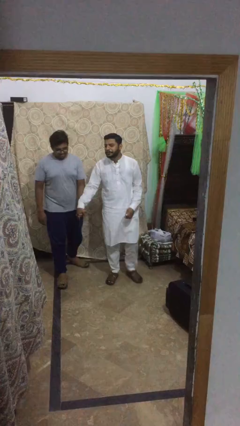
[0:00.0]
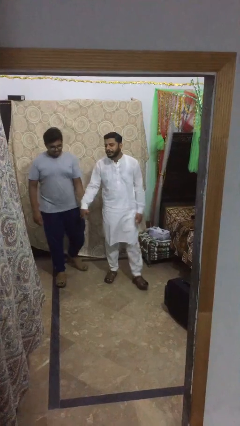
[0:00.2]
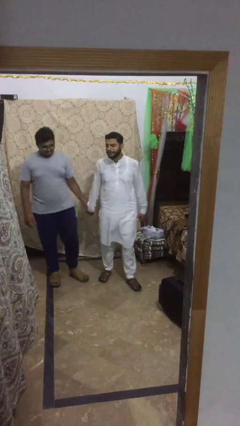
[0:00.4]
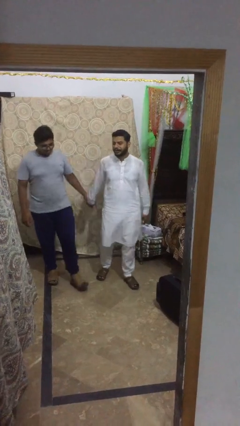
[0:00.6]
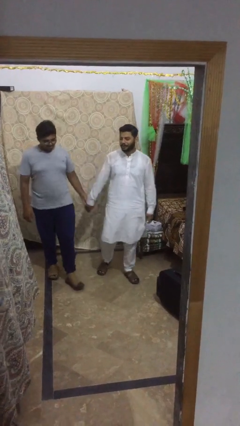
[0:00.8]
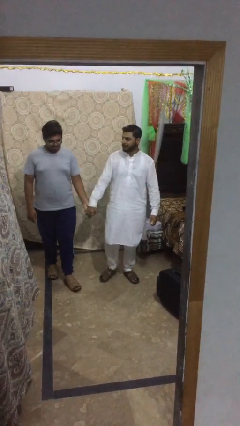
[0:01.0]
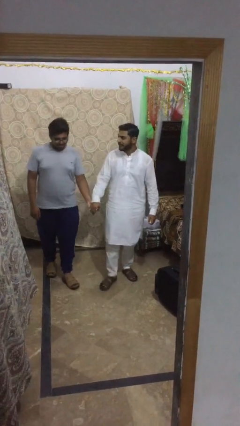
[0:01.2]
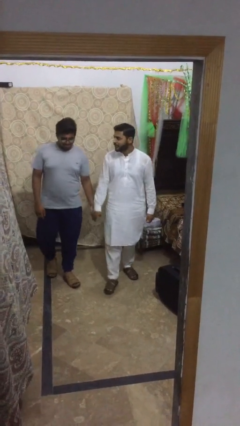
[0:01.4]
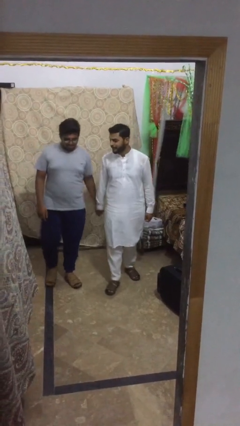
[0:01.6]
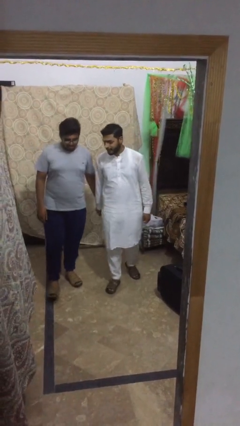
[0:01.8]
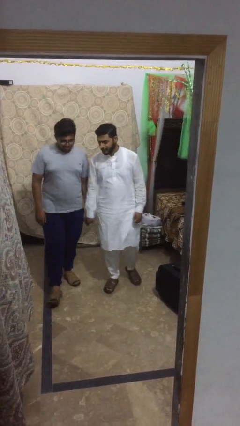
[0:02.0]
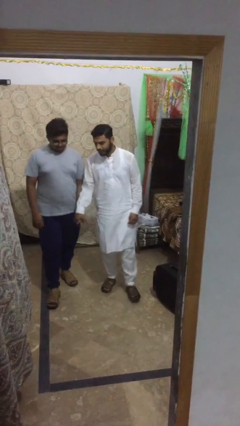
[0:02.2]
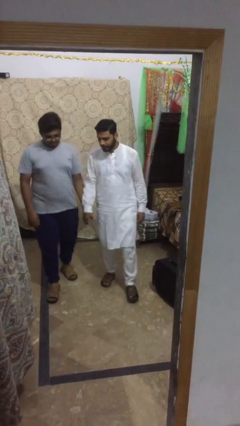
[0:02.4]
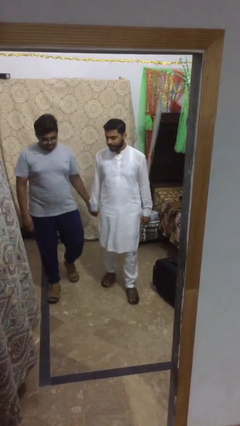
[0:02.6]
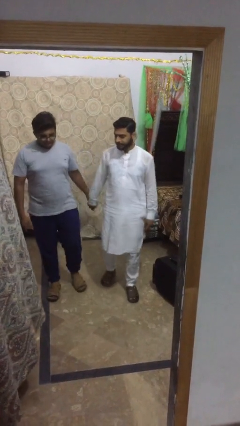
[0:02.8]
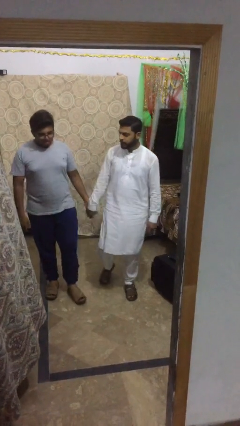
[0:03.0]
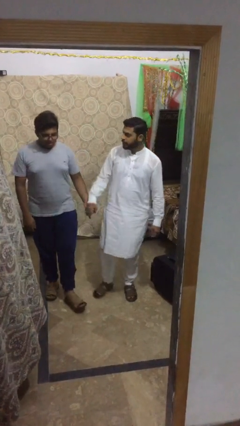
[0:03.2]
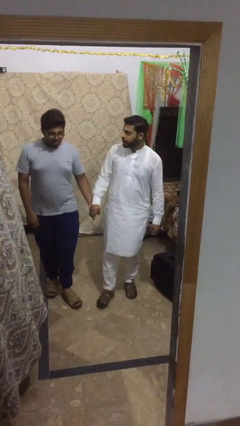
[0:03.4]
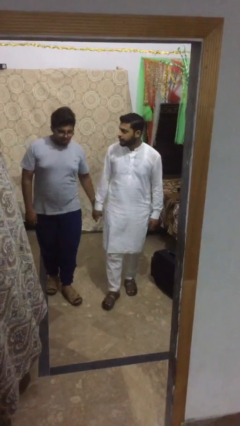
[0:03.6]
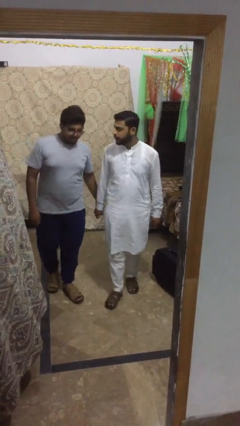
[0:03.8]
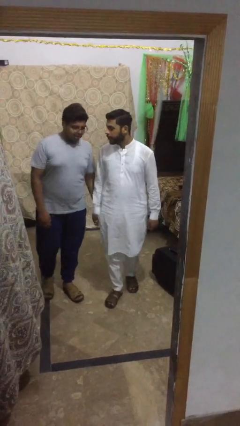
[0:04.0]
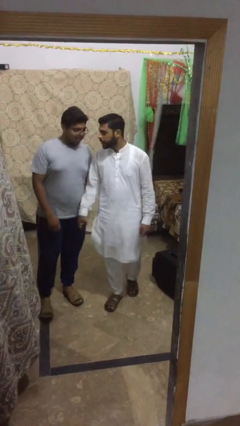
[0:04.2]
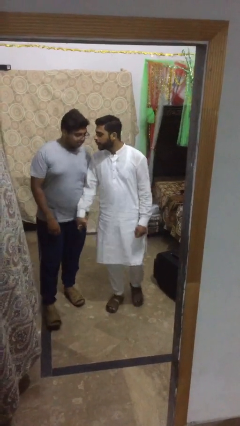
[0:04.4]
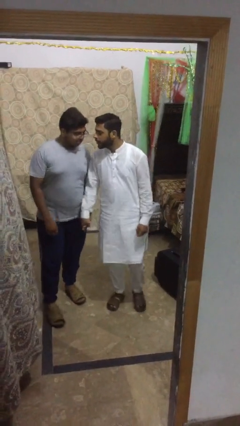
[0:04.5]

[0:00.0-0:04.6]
person holds hand

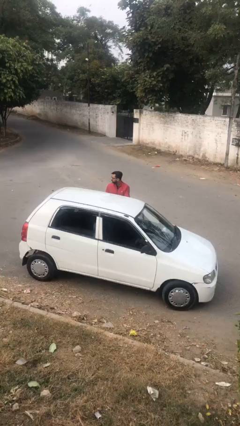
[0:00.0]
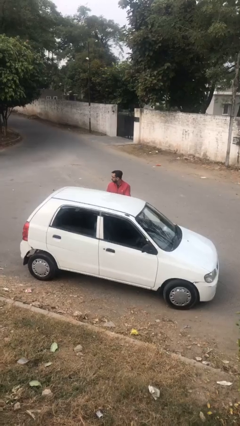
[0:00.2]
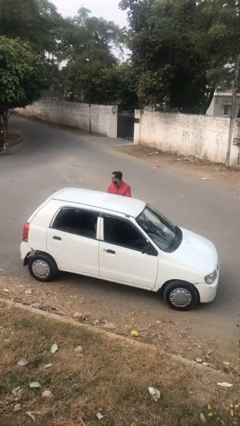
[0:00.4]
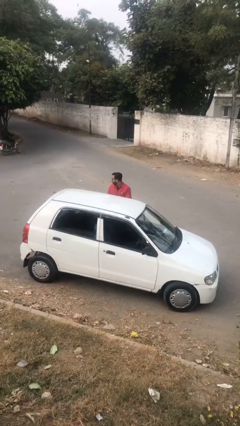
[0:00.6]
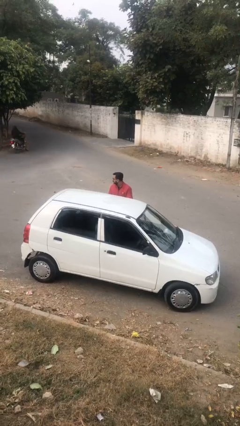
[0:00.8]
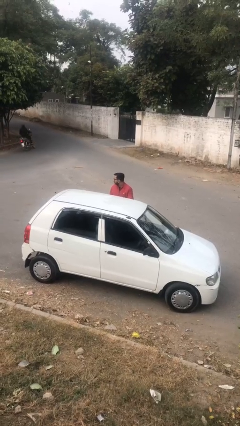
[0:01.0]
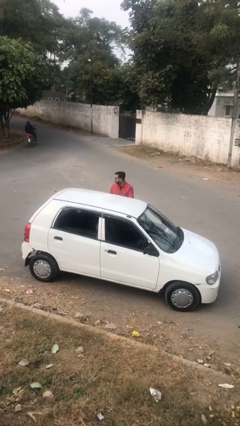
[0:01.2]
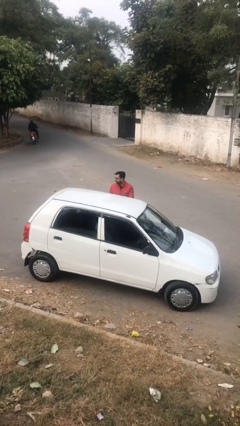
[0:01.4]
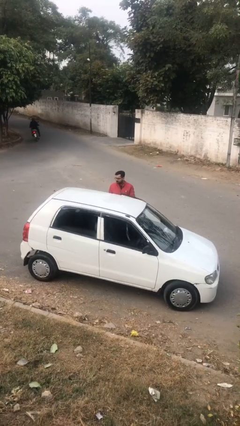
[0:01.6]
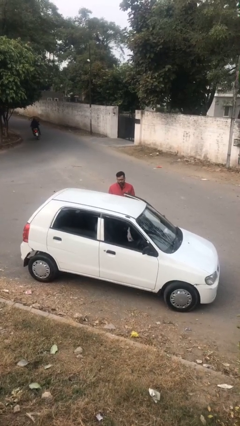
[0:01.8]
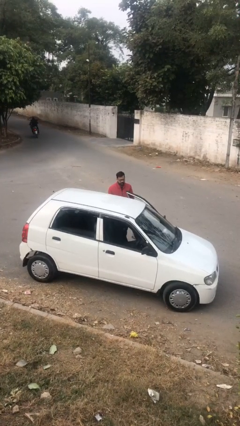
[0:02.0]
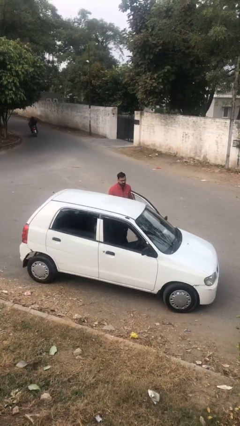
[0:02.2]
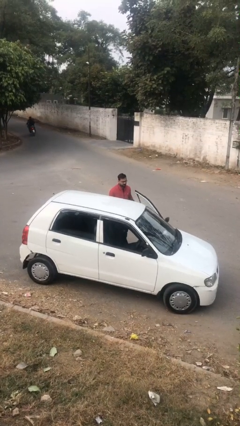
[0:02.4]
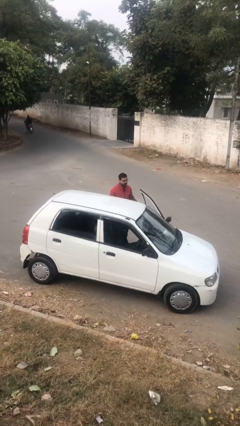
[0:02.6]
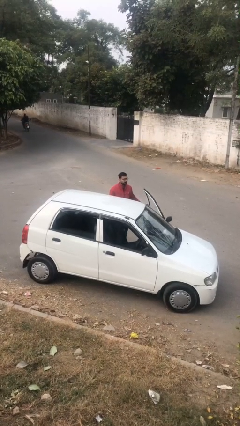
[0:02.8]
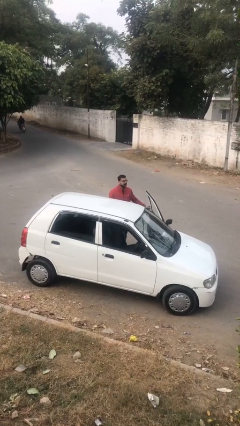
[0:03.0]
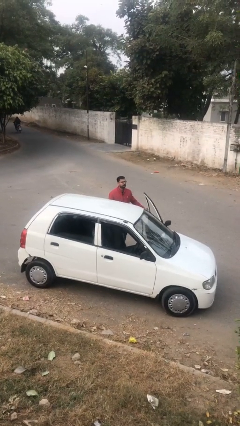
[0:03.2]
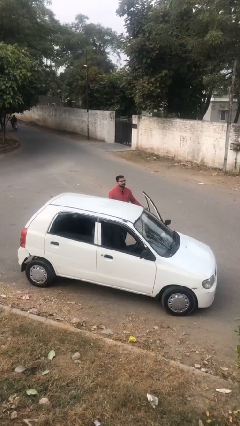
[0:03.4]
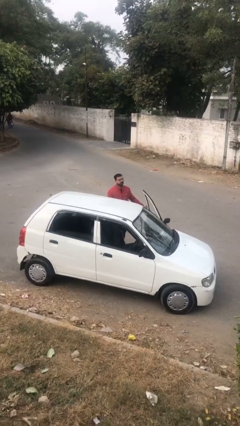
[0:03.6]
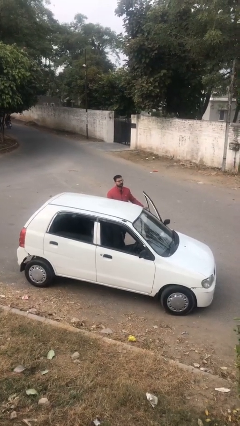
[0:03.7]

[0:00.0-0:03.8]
person opens car door

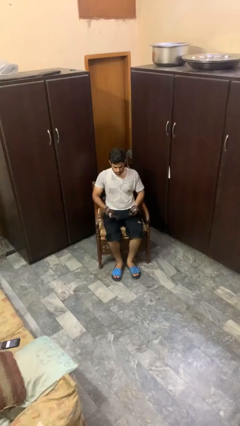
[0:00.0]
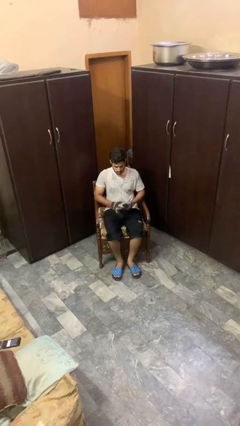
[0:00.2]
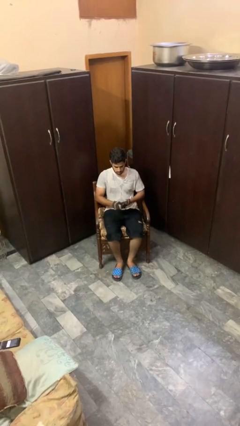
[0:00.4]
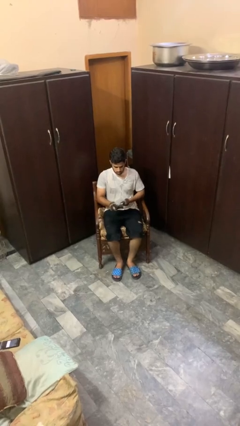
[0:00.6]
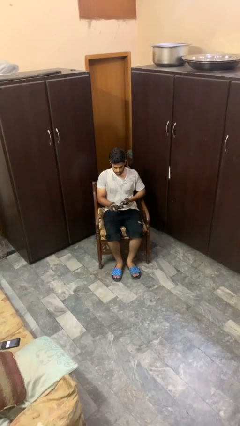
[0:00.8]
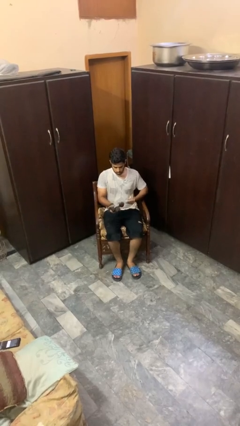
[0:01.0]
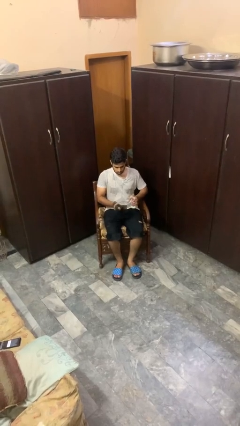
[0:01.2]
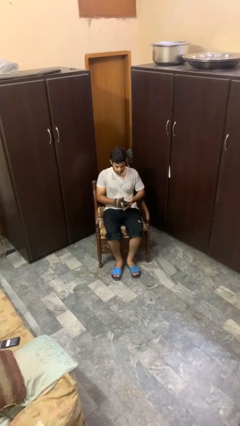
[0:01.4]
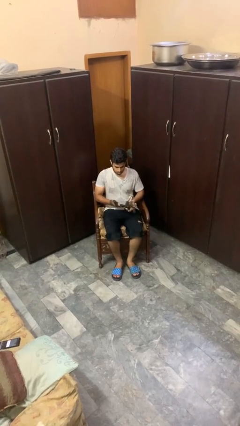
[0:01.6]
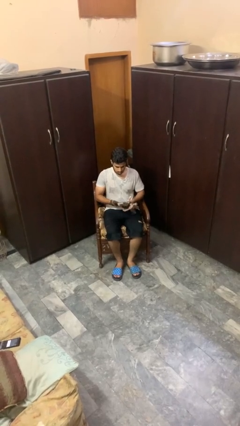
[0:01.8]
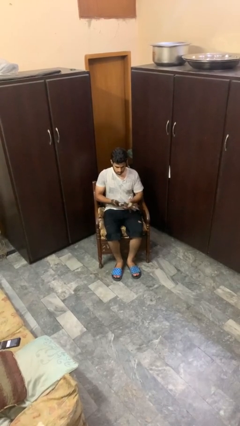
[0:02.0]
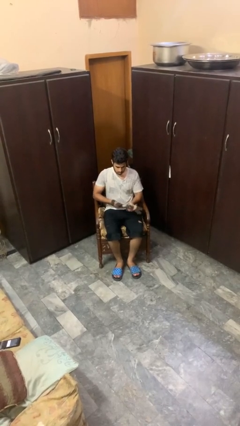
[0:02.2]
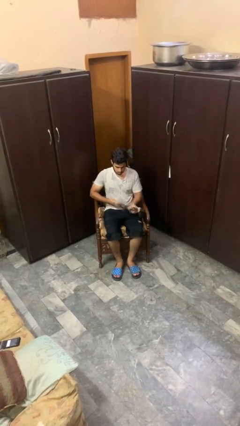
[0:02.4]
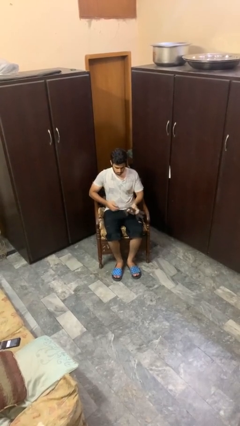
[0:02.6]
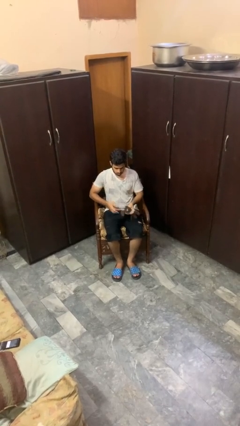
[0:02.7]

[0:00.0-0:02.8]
person takes off gloves

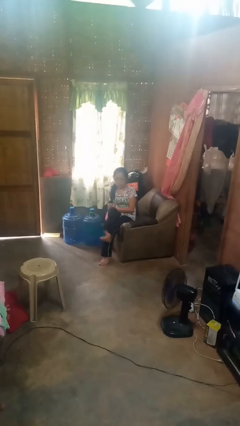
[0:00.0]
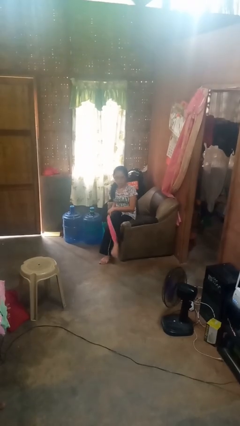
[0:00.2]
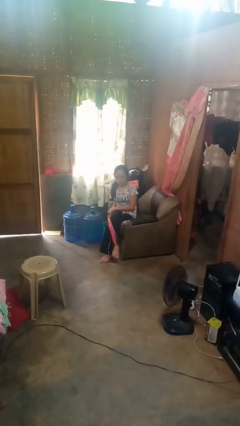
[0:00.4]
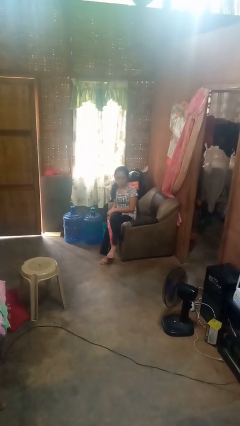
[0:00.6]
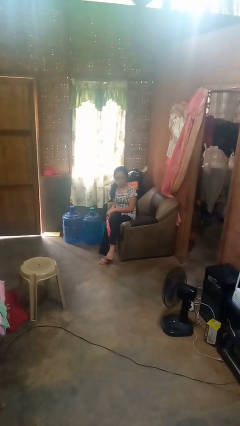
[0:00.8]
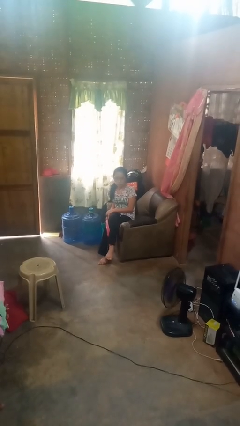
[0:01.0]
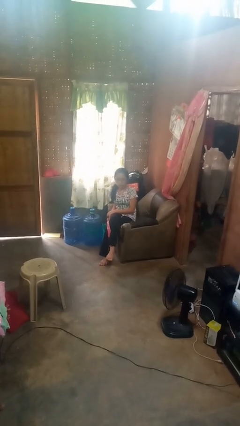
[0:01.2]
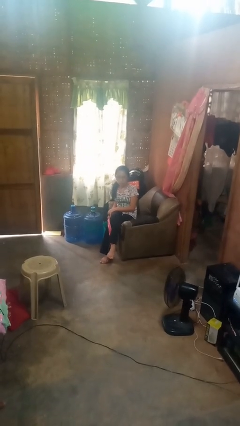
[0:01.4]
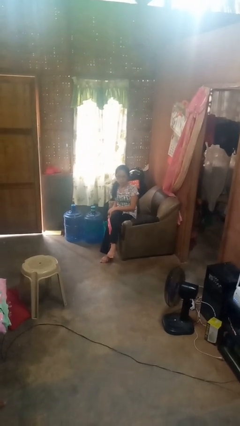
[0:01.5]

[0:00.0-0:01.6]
person crosses legs

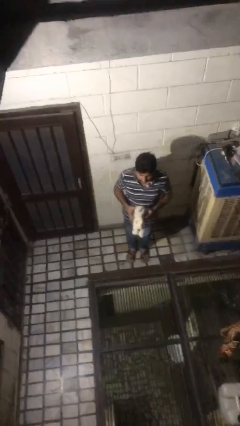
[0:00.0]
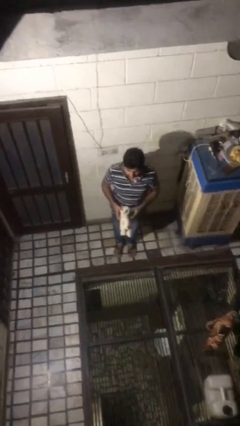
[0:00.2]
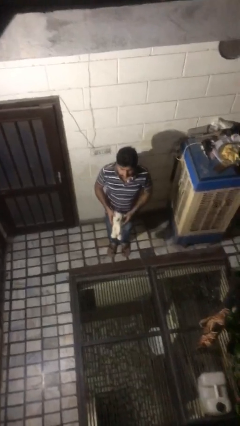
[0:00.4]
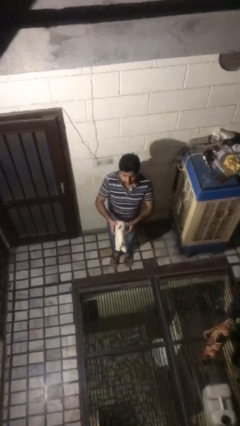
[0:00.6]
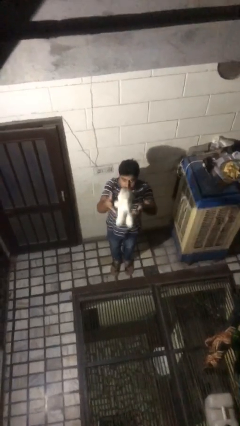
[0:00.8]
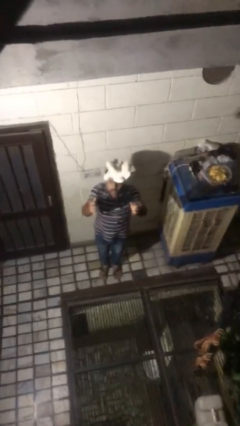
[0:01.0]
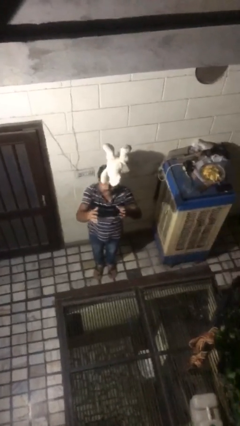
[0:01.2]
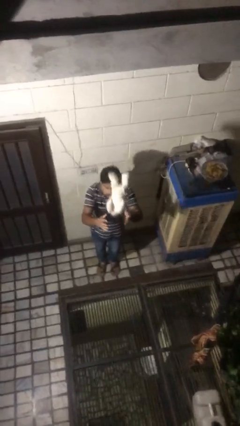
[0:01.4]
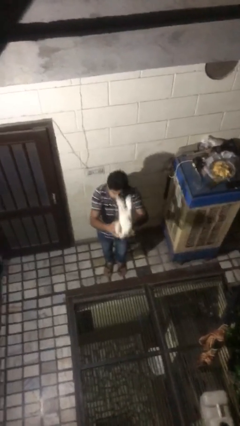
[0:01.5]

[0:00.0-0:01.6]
person drops object

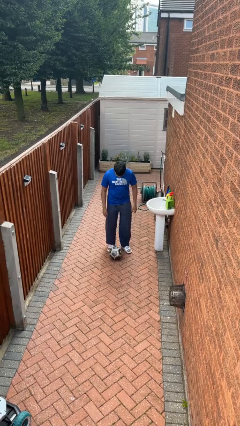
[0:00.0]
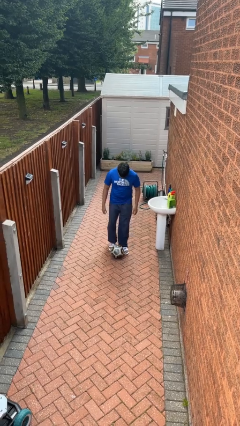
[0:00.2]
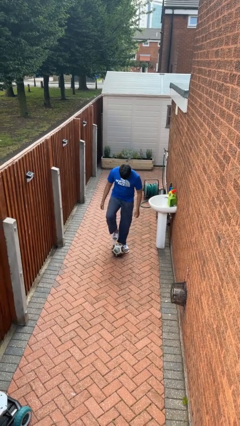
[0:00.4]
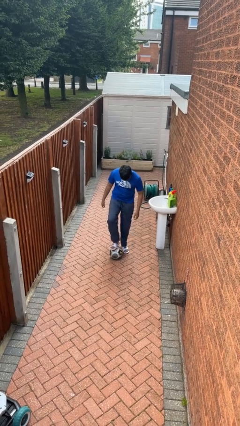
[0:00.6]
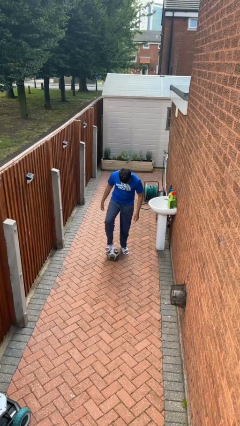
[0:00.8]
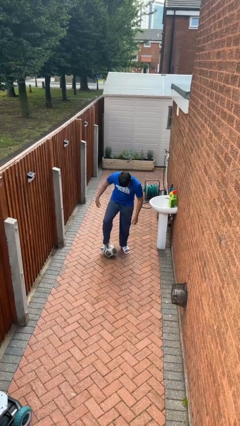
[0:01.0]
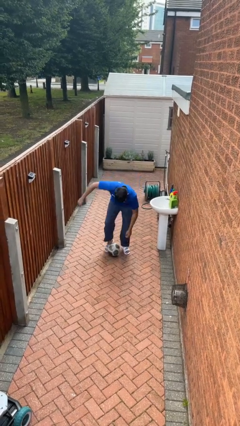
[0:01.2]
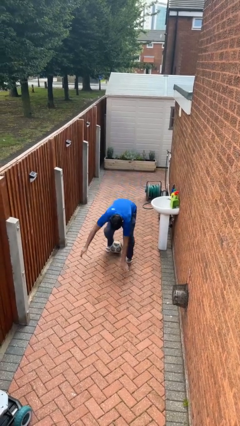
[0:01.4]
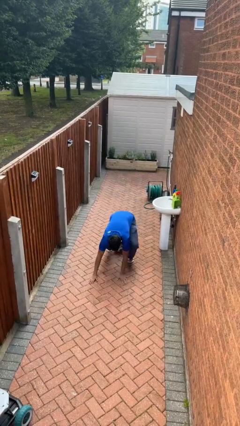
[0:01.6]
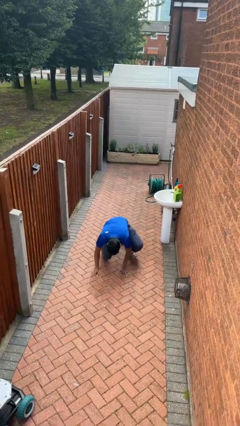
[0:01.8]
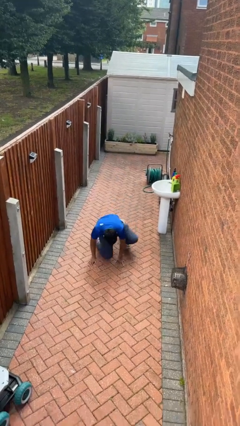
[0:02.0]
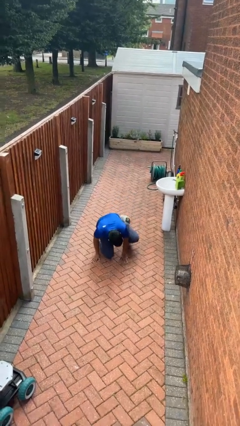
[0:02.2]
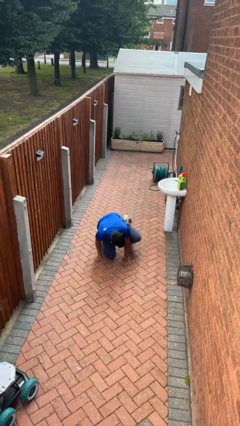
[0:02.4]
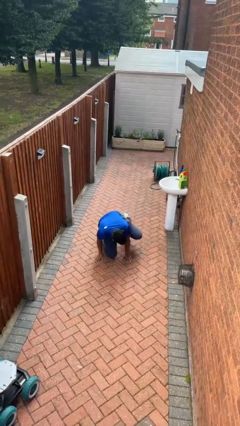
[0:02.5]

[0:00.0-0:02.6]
person trips on object on floor

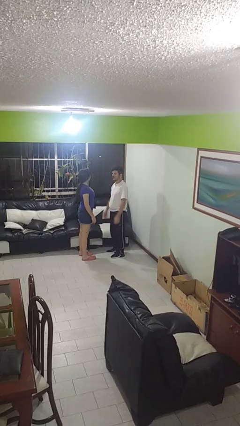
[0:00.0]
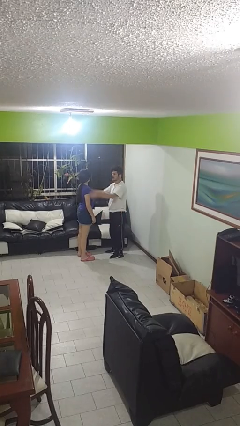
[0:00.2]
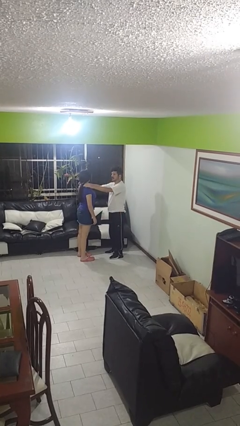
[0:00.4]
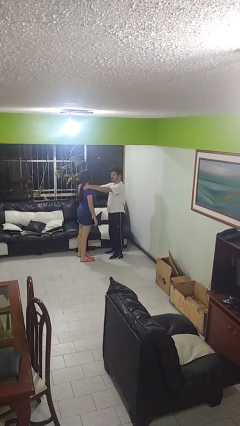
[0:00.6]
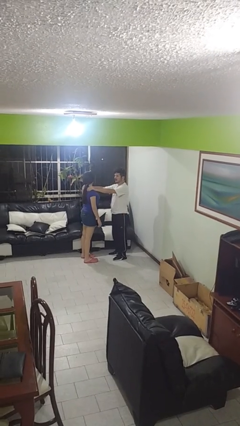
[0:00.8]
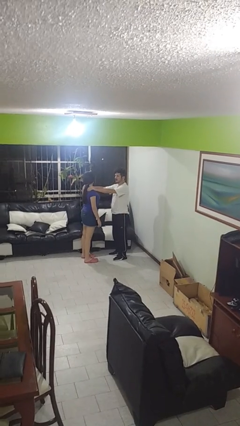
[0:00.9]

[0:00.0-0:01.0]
person grabs person by shoulder
